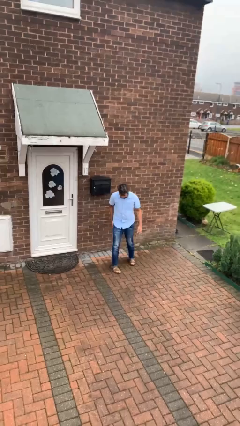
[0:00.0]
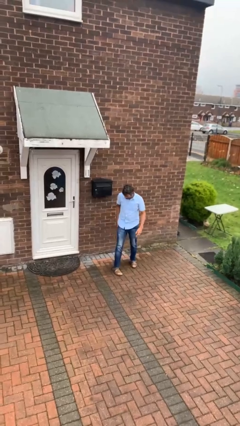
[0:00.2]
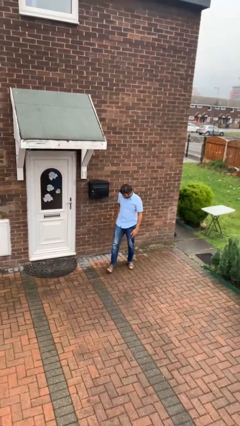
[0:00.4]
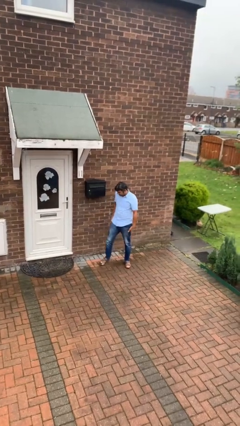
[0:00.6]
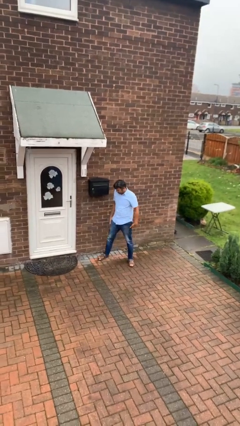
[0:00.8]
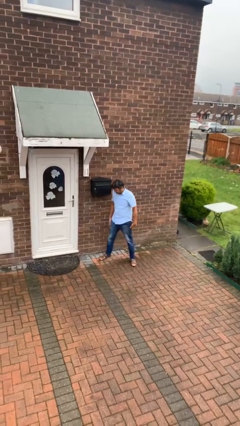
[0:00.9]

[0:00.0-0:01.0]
person stands up

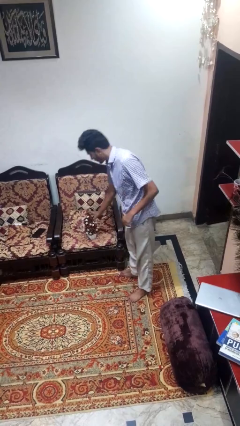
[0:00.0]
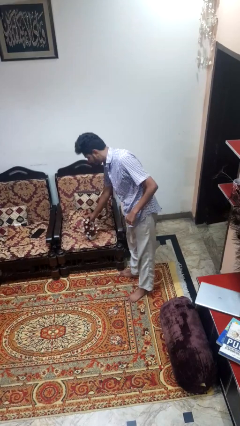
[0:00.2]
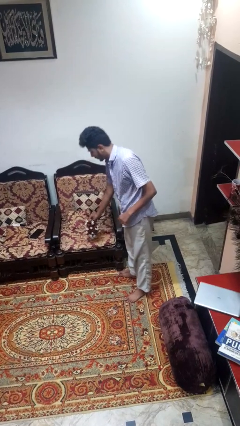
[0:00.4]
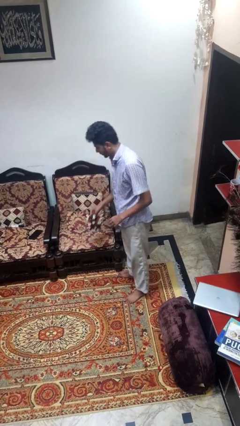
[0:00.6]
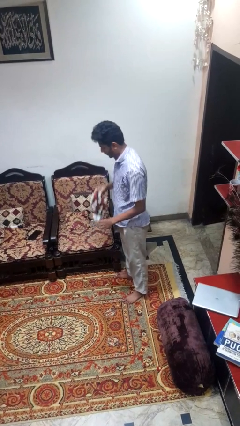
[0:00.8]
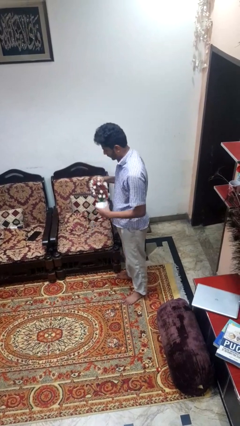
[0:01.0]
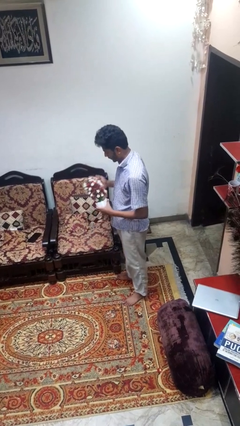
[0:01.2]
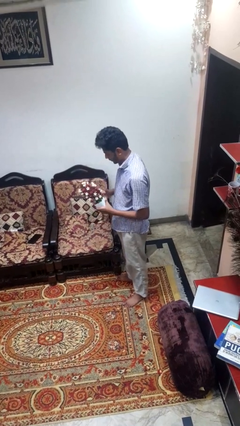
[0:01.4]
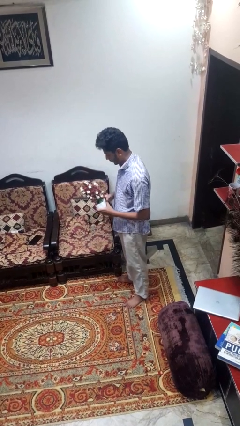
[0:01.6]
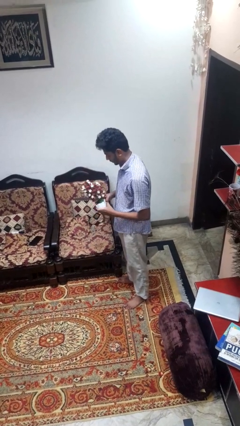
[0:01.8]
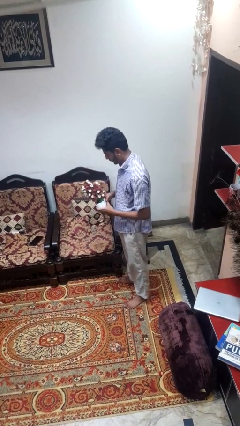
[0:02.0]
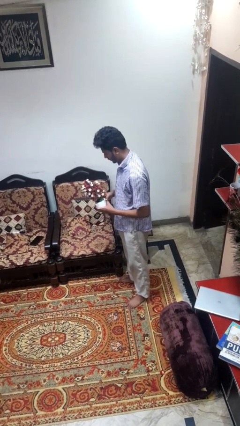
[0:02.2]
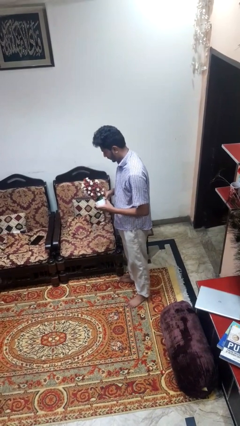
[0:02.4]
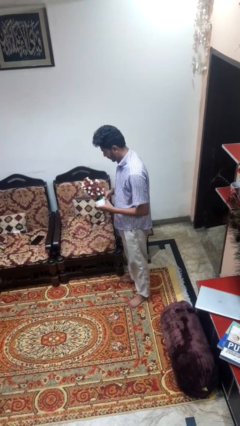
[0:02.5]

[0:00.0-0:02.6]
person picks up object from couch

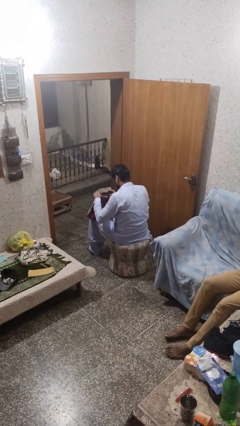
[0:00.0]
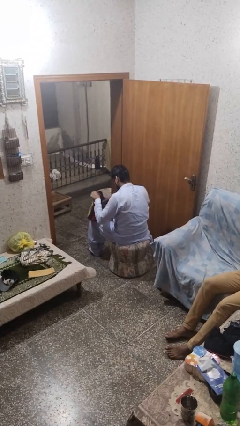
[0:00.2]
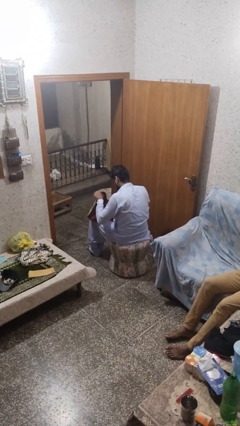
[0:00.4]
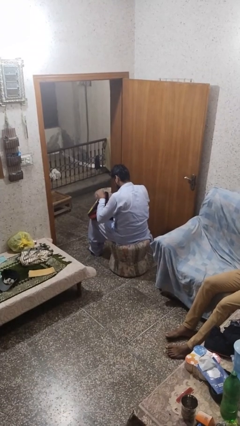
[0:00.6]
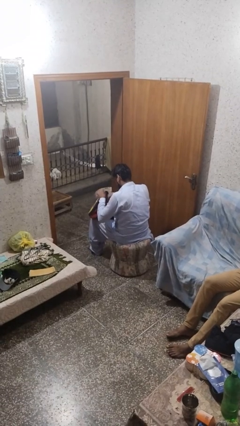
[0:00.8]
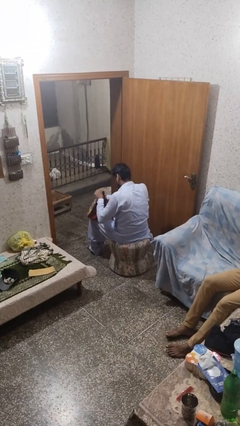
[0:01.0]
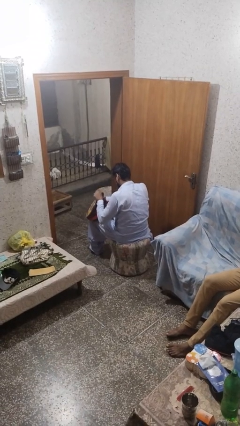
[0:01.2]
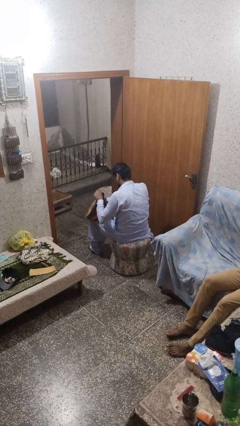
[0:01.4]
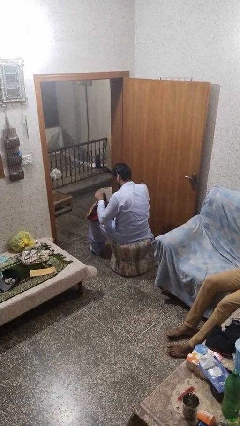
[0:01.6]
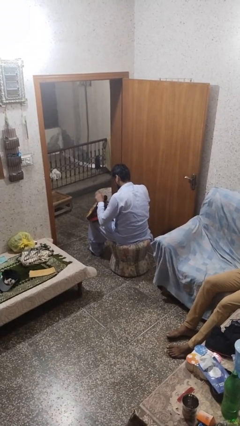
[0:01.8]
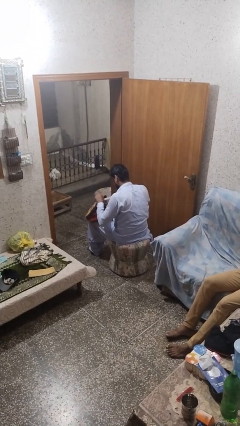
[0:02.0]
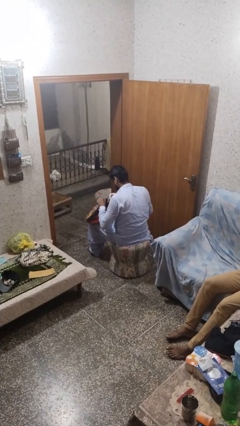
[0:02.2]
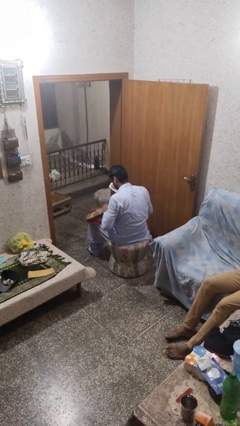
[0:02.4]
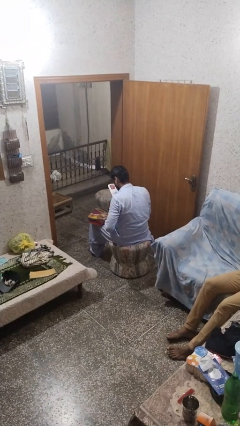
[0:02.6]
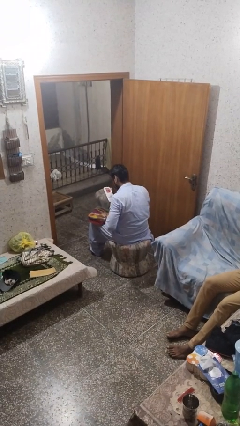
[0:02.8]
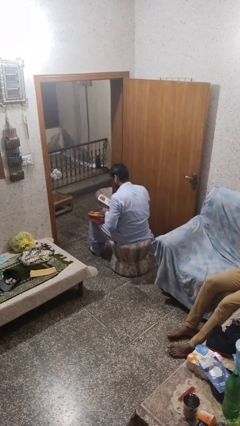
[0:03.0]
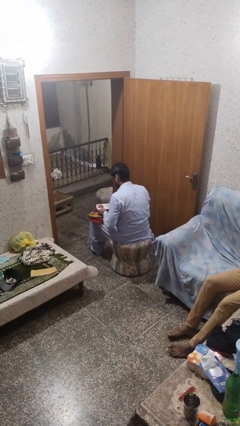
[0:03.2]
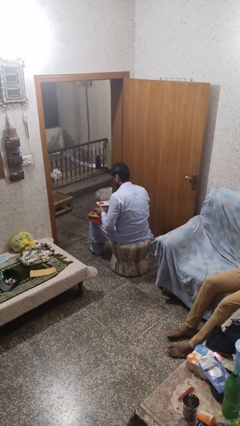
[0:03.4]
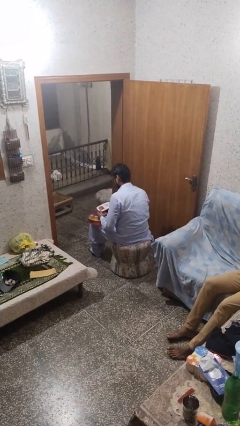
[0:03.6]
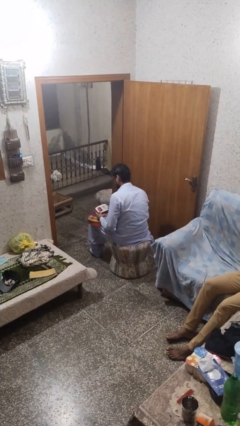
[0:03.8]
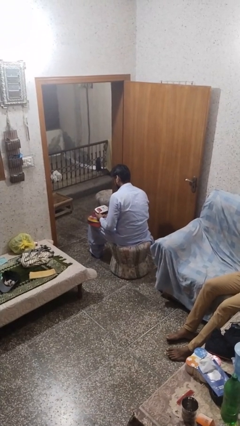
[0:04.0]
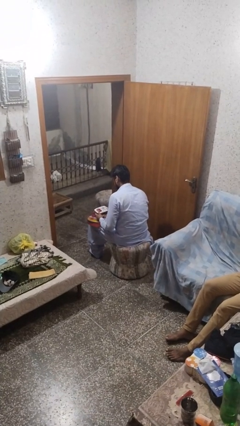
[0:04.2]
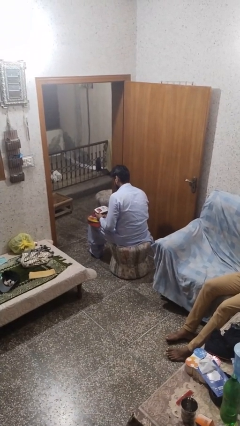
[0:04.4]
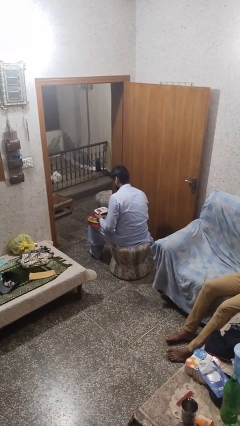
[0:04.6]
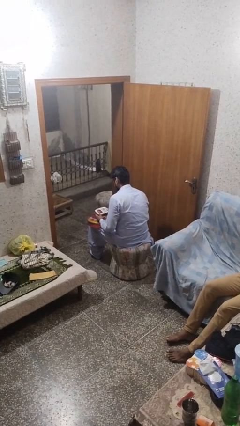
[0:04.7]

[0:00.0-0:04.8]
person takes object from backpack

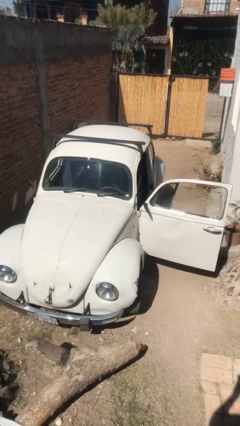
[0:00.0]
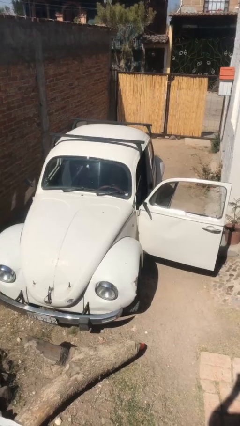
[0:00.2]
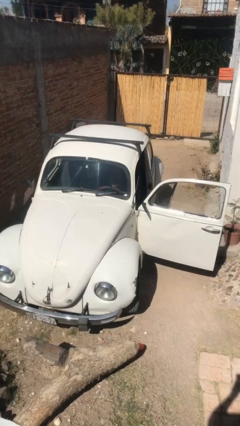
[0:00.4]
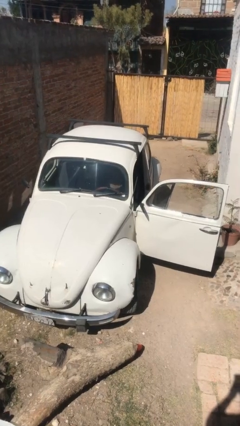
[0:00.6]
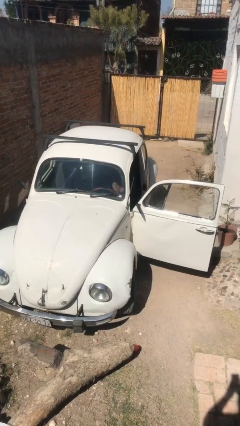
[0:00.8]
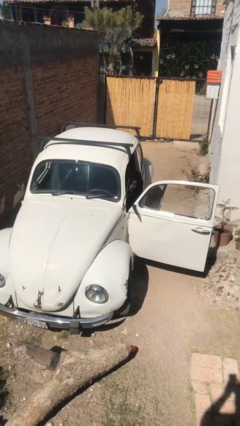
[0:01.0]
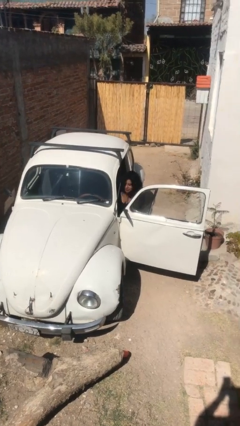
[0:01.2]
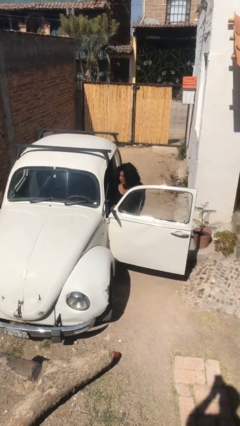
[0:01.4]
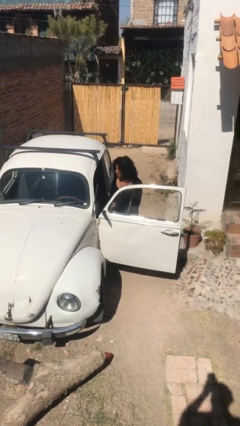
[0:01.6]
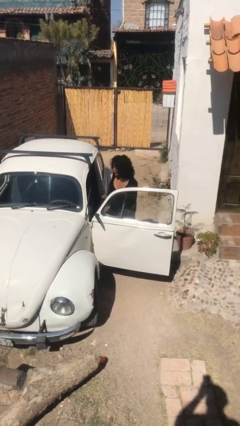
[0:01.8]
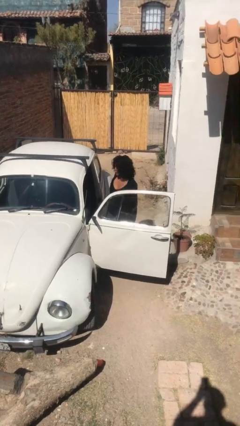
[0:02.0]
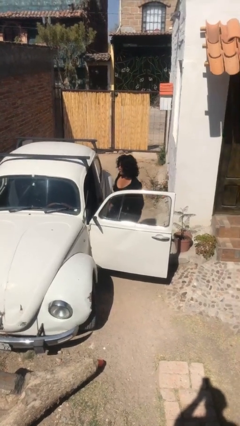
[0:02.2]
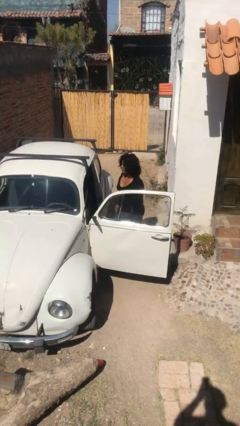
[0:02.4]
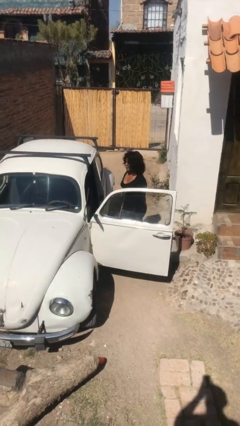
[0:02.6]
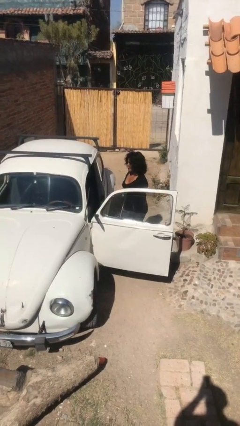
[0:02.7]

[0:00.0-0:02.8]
person exits car

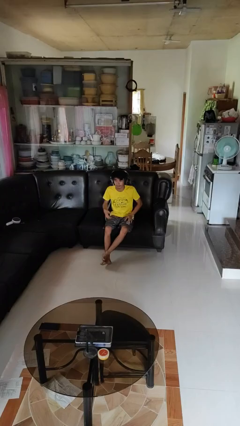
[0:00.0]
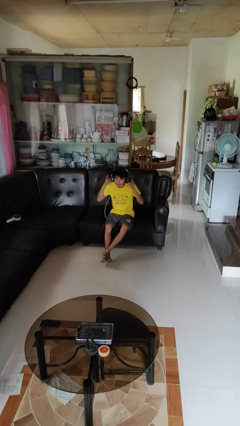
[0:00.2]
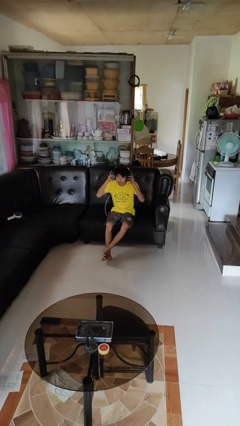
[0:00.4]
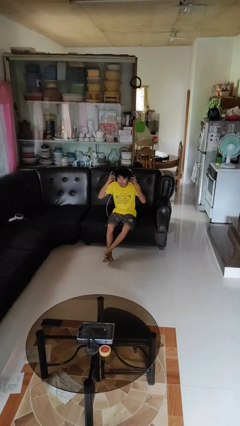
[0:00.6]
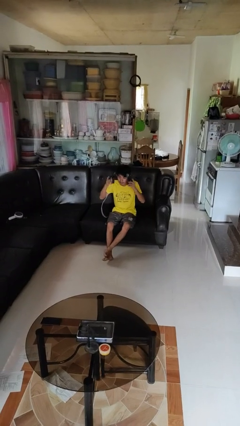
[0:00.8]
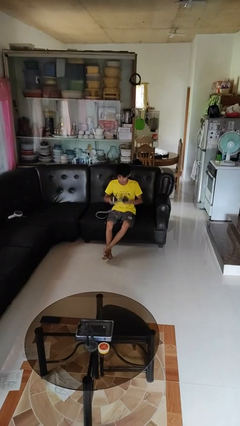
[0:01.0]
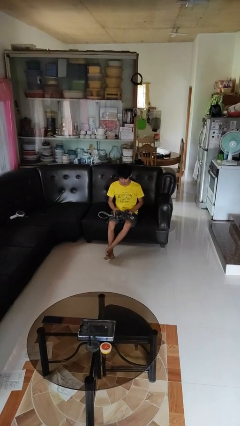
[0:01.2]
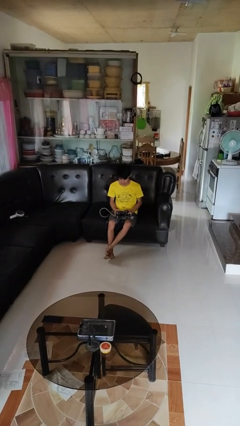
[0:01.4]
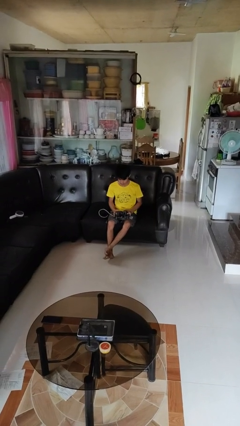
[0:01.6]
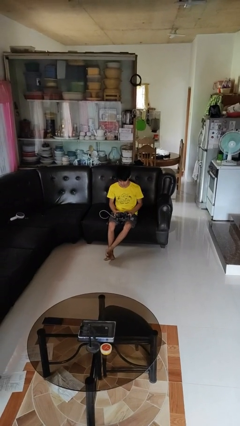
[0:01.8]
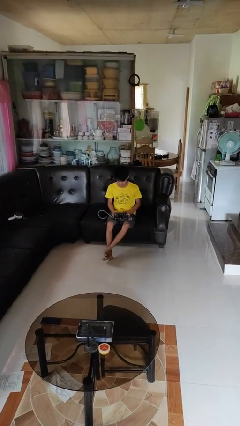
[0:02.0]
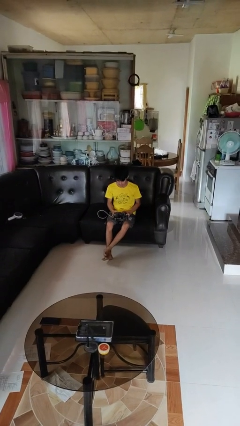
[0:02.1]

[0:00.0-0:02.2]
person takes off headphones

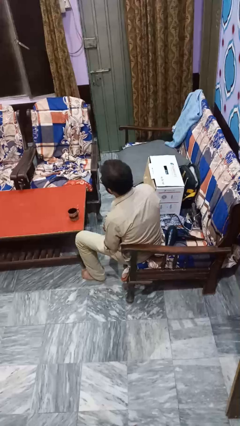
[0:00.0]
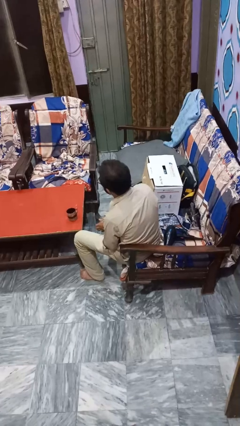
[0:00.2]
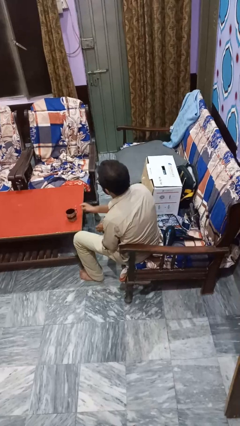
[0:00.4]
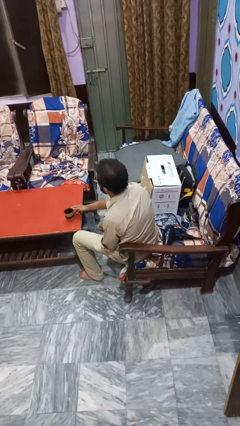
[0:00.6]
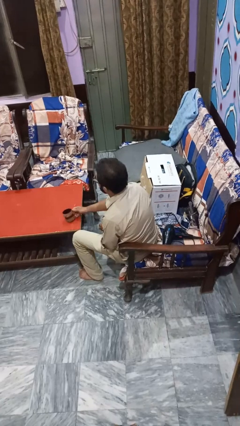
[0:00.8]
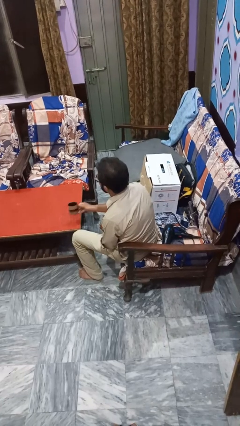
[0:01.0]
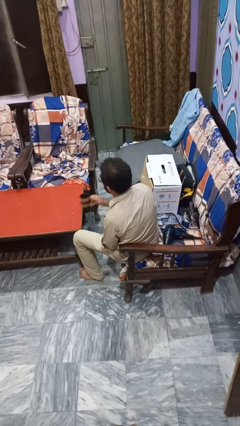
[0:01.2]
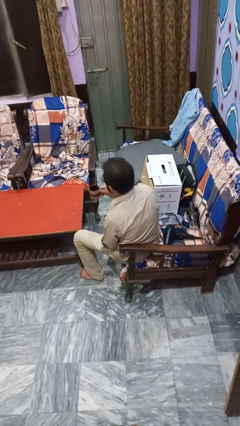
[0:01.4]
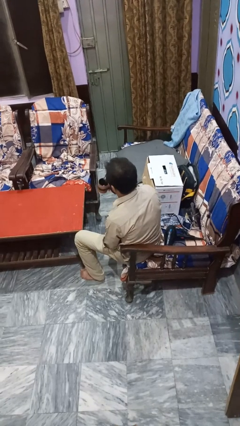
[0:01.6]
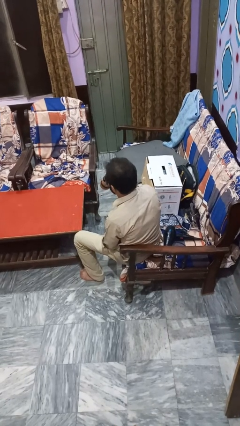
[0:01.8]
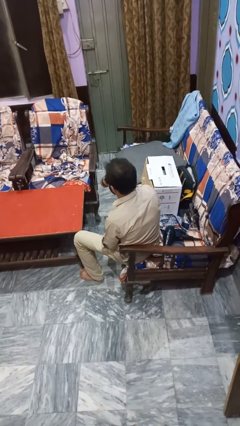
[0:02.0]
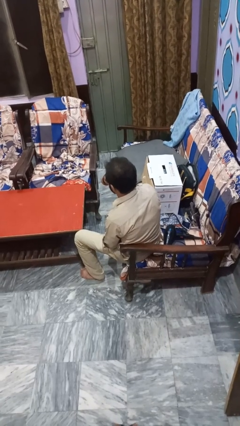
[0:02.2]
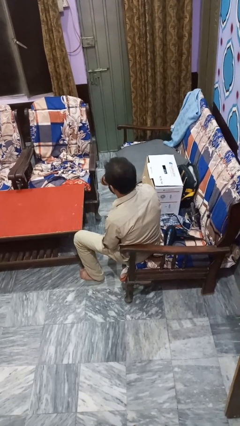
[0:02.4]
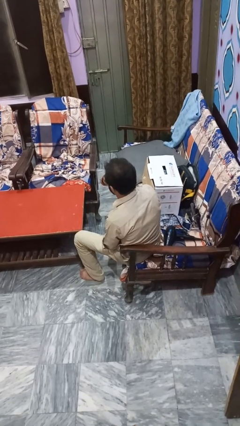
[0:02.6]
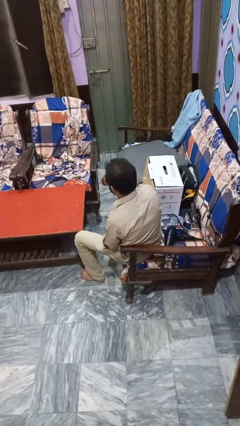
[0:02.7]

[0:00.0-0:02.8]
person pours coffee into mug

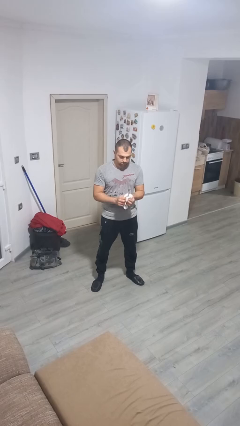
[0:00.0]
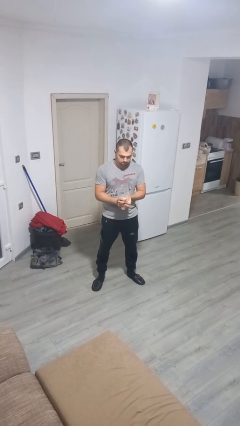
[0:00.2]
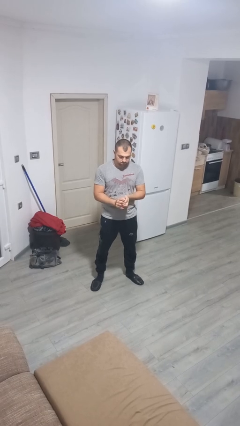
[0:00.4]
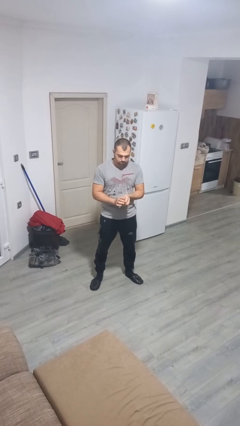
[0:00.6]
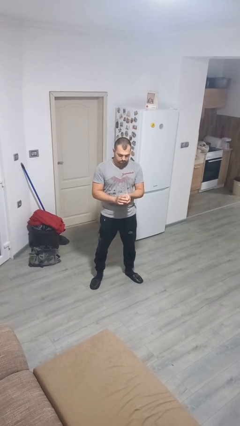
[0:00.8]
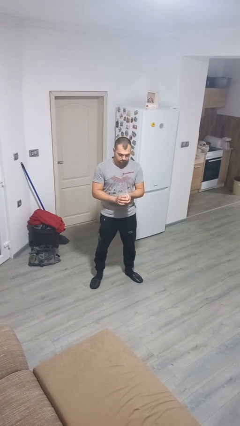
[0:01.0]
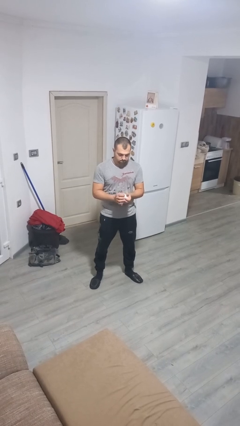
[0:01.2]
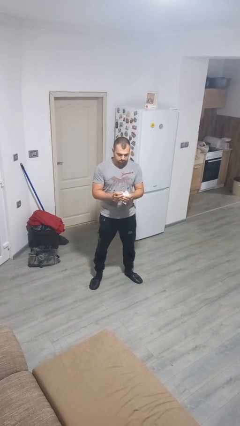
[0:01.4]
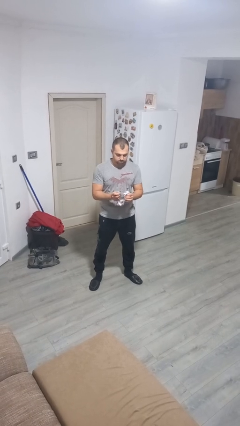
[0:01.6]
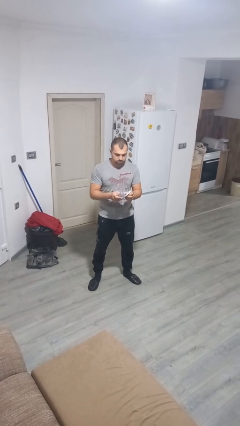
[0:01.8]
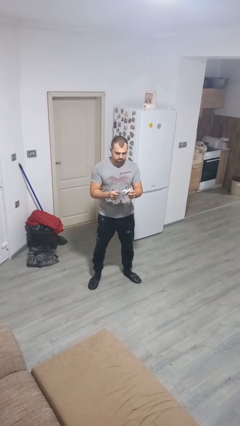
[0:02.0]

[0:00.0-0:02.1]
person crumples paper
